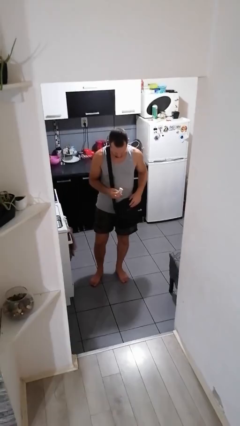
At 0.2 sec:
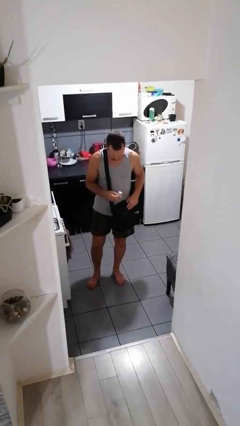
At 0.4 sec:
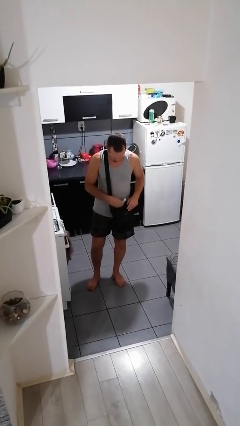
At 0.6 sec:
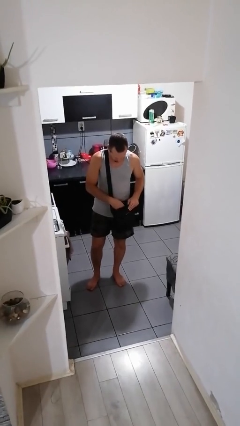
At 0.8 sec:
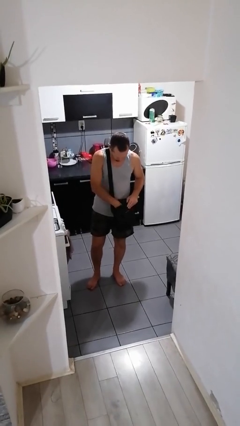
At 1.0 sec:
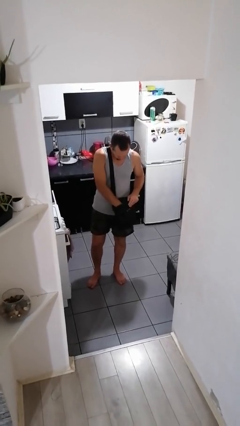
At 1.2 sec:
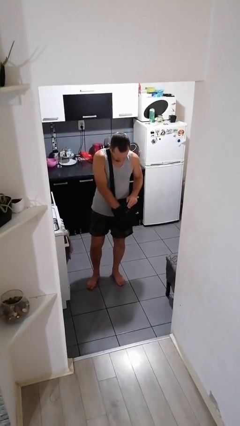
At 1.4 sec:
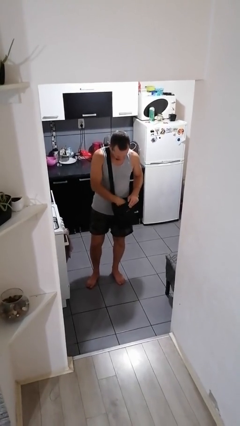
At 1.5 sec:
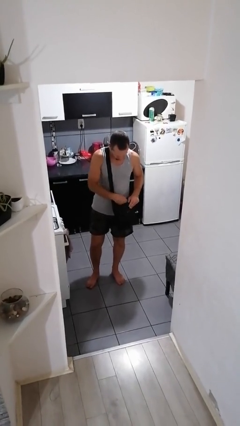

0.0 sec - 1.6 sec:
person puts object into purse

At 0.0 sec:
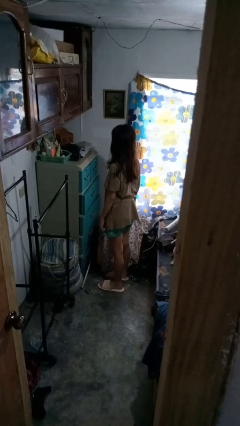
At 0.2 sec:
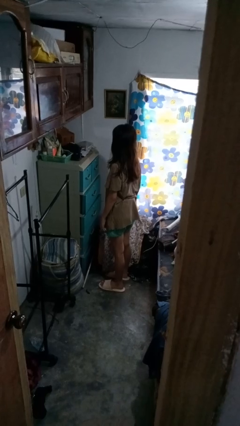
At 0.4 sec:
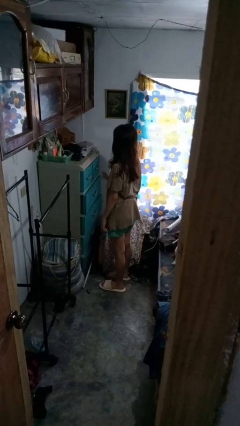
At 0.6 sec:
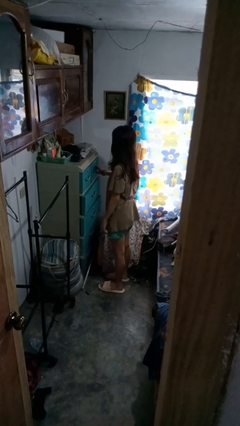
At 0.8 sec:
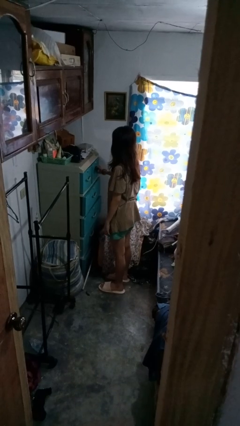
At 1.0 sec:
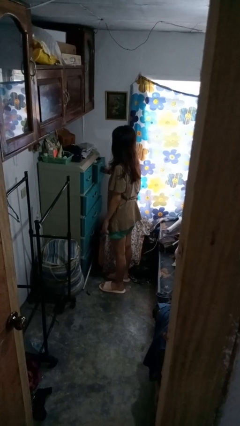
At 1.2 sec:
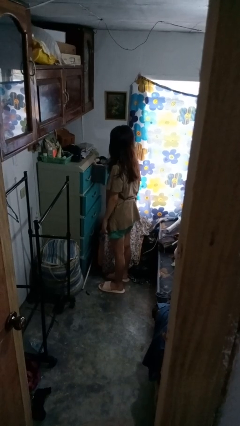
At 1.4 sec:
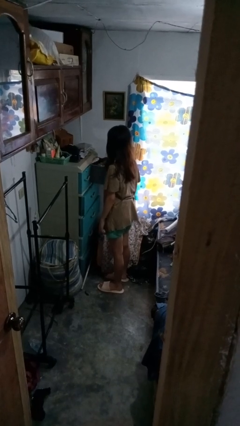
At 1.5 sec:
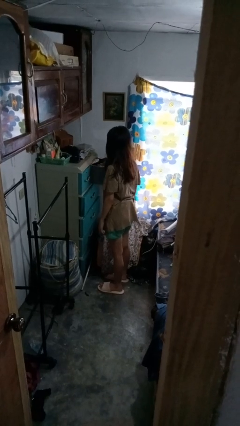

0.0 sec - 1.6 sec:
person opens dresser drawer

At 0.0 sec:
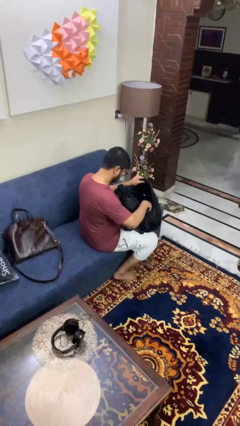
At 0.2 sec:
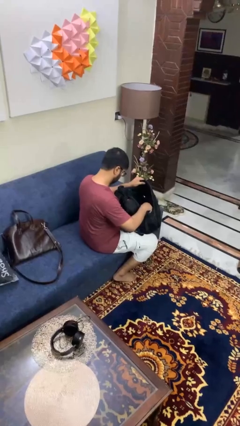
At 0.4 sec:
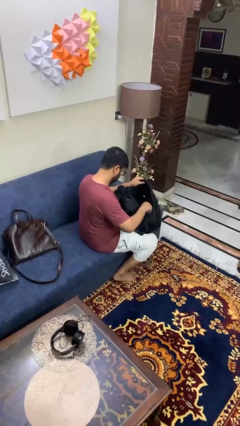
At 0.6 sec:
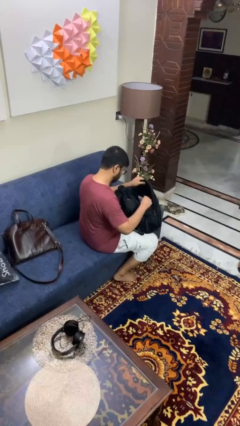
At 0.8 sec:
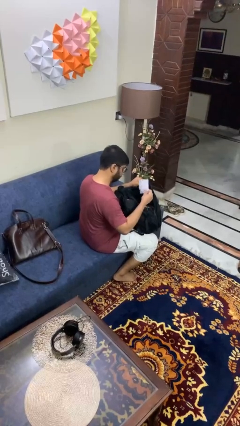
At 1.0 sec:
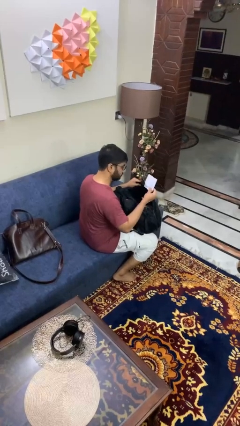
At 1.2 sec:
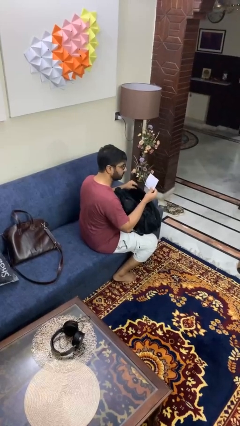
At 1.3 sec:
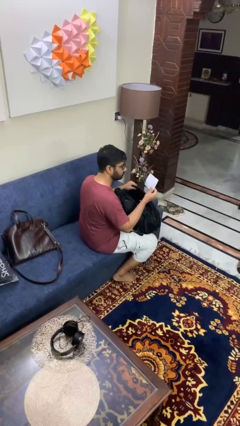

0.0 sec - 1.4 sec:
person takes object from backpack

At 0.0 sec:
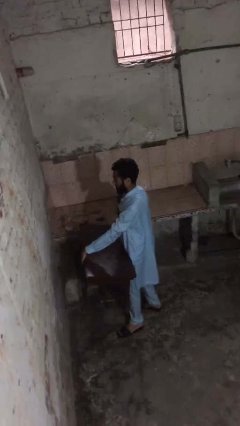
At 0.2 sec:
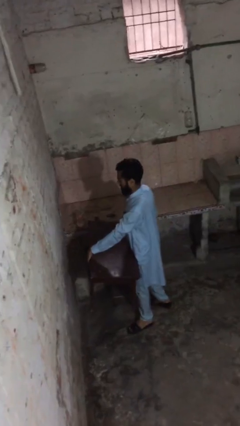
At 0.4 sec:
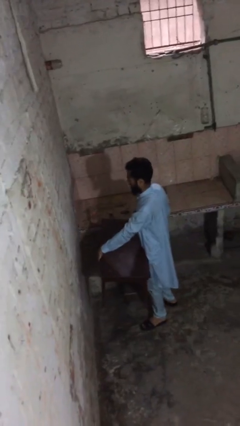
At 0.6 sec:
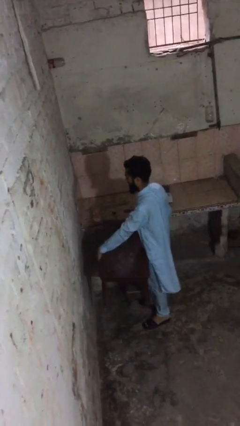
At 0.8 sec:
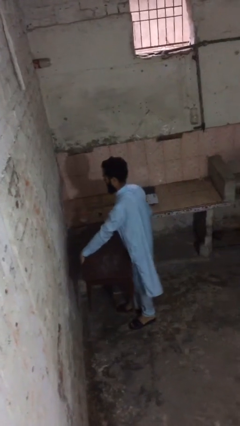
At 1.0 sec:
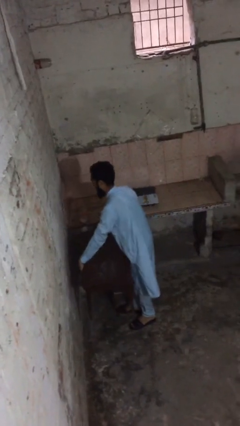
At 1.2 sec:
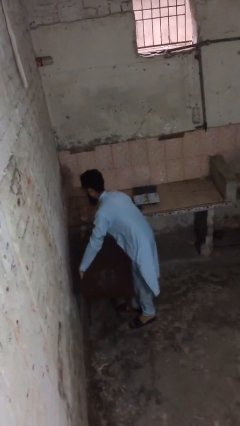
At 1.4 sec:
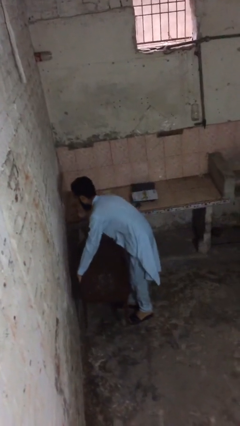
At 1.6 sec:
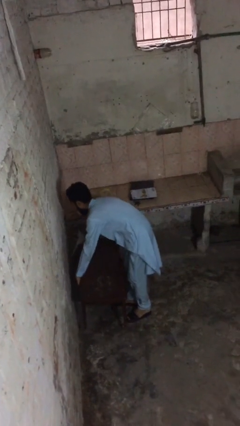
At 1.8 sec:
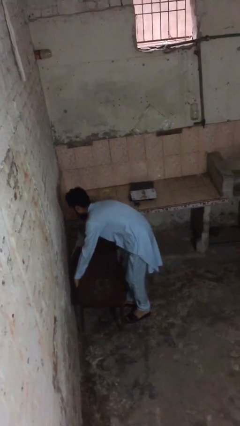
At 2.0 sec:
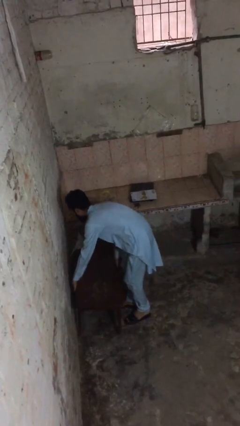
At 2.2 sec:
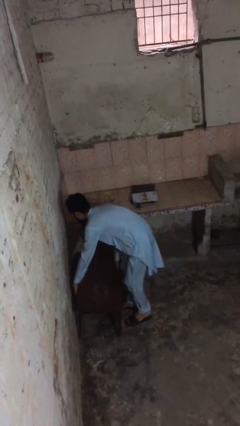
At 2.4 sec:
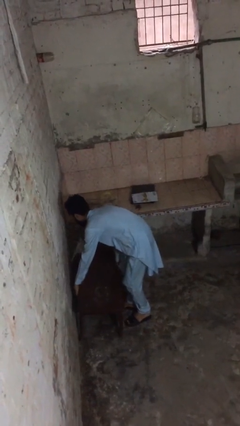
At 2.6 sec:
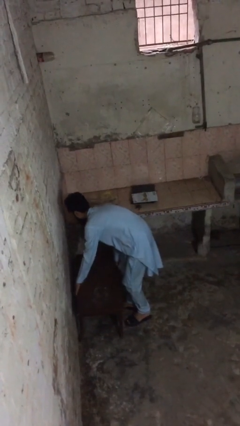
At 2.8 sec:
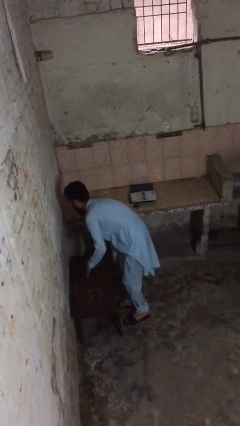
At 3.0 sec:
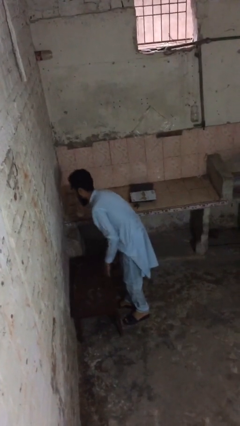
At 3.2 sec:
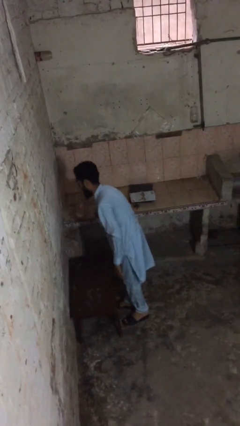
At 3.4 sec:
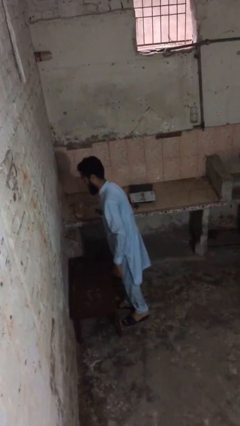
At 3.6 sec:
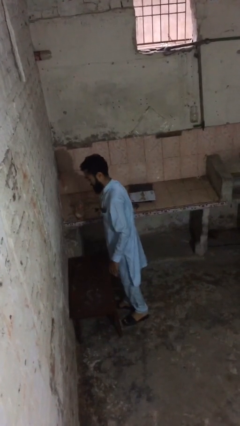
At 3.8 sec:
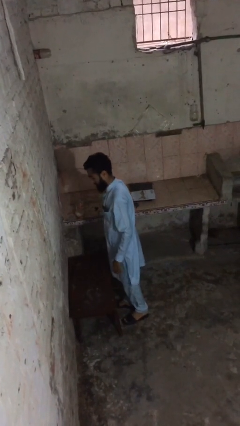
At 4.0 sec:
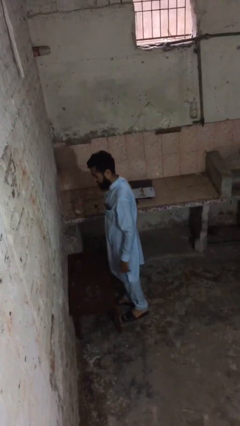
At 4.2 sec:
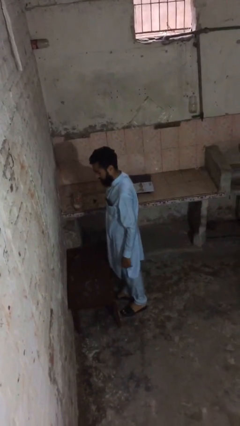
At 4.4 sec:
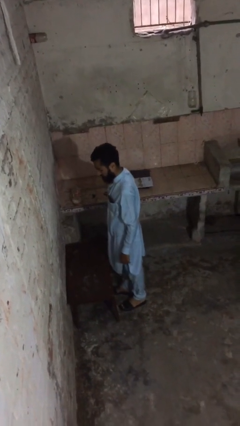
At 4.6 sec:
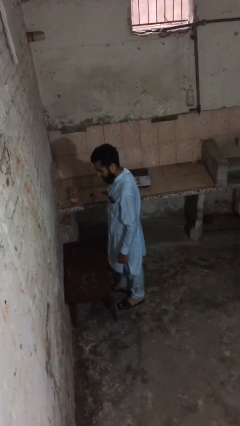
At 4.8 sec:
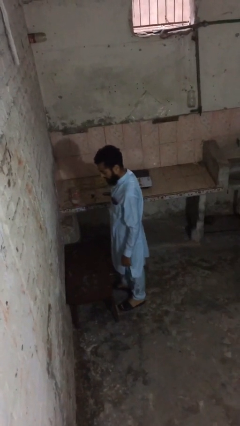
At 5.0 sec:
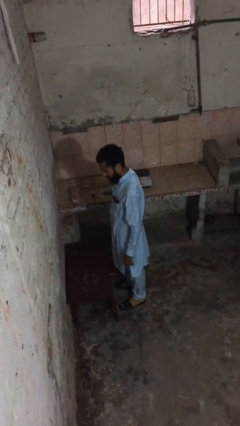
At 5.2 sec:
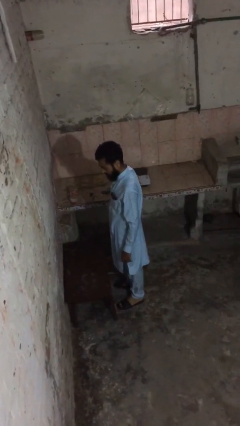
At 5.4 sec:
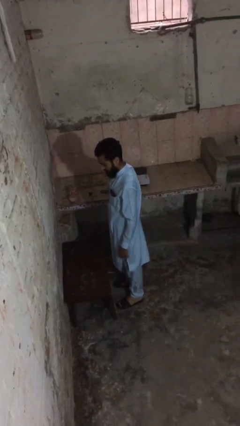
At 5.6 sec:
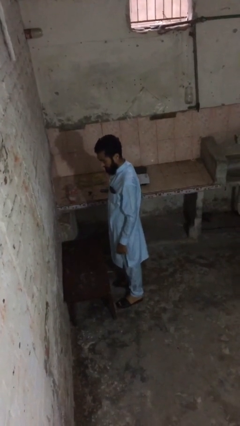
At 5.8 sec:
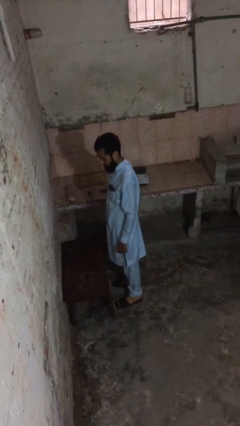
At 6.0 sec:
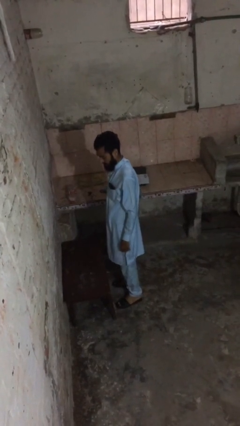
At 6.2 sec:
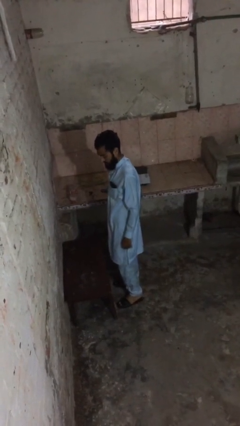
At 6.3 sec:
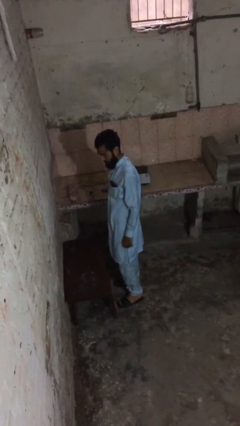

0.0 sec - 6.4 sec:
person puts down object on floor

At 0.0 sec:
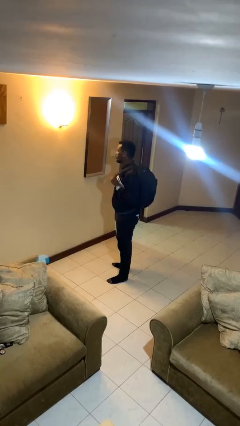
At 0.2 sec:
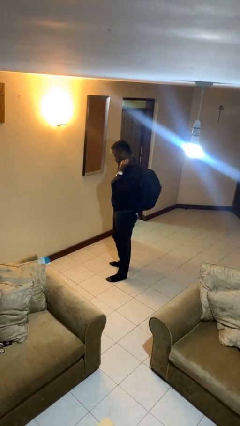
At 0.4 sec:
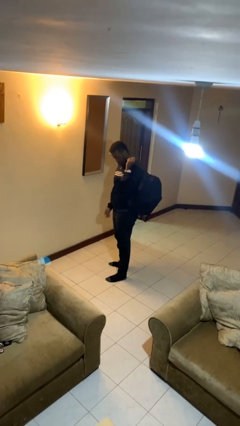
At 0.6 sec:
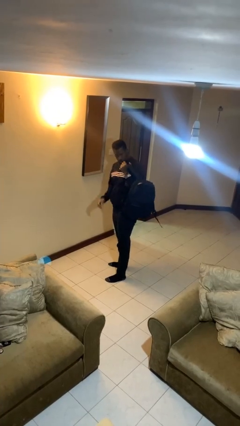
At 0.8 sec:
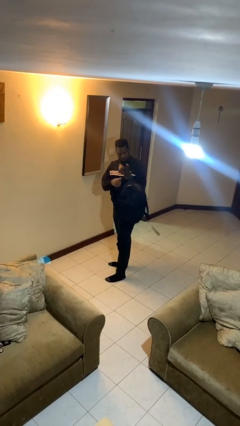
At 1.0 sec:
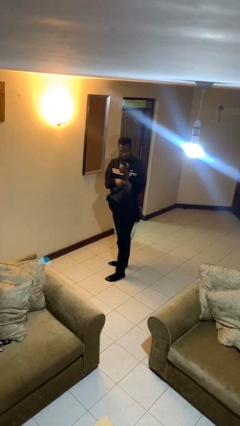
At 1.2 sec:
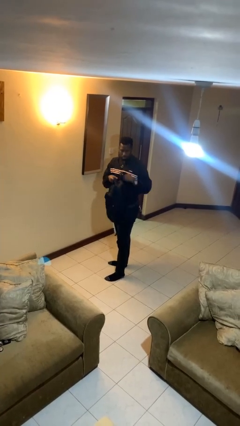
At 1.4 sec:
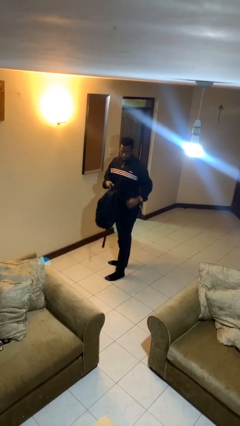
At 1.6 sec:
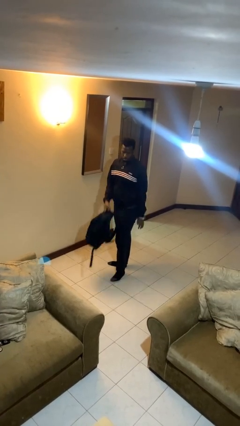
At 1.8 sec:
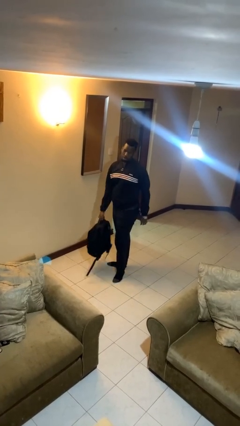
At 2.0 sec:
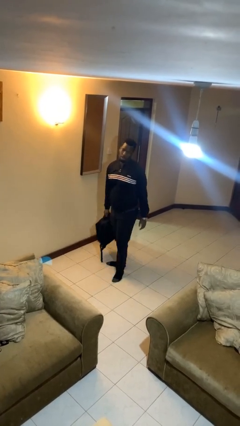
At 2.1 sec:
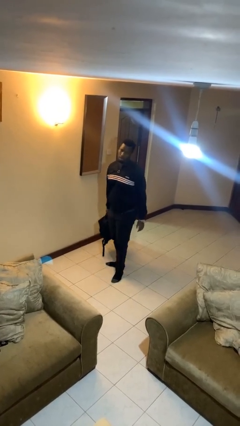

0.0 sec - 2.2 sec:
person takes off backpack

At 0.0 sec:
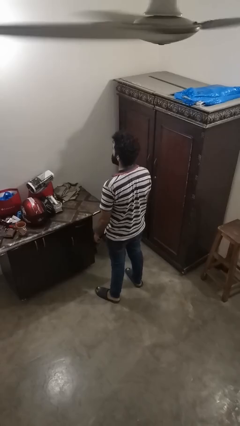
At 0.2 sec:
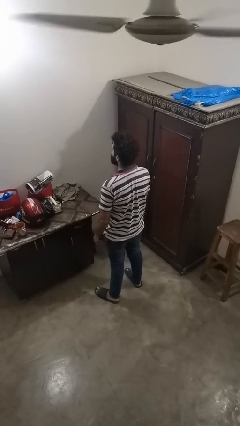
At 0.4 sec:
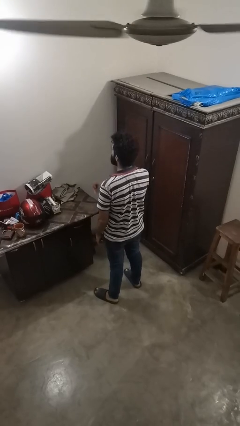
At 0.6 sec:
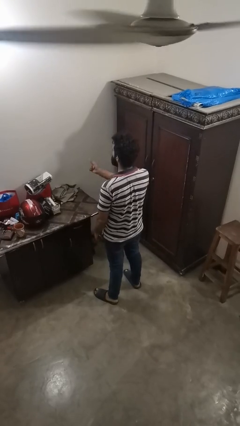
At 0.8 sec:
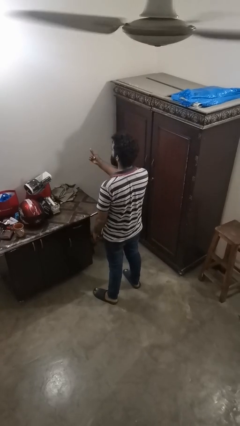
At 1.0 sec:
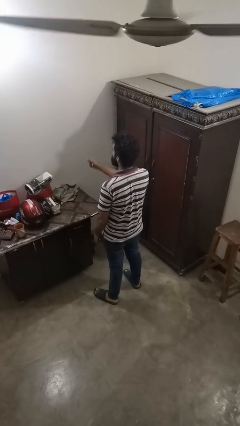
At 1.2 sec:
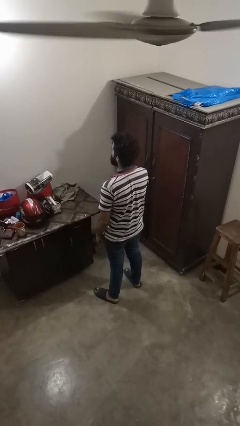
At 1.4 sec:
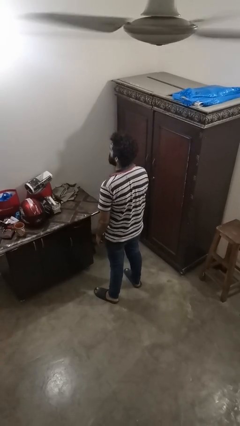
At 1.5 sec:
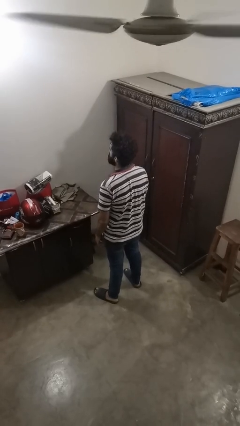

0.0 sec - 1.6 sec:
person snaps fingers

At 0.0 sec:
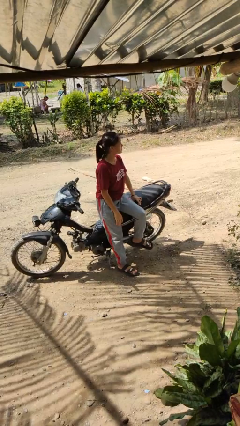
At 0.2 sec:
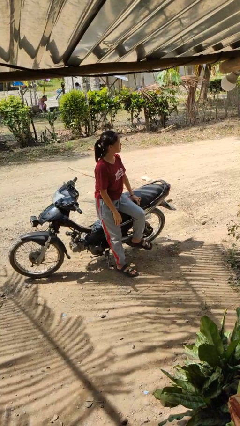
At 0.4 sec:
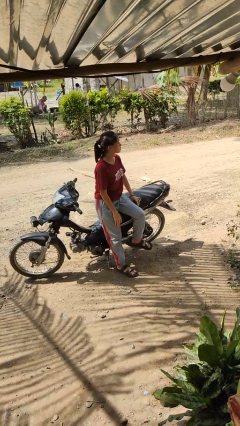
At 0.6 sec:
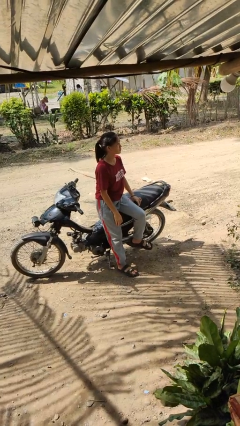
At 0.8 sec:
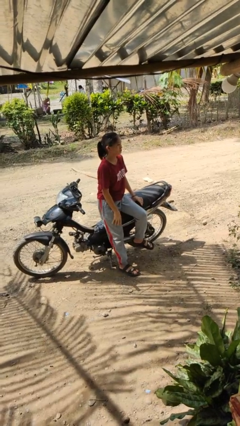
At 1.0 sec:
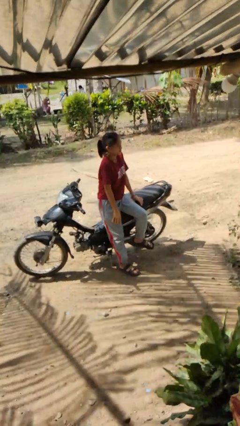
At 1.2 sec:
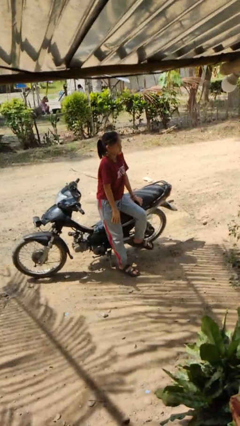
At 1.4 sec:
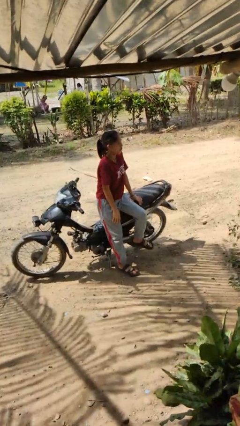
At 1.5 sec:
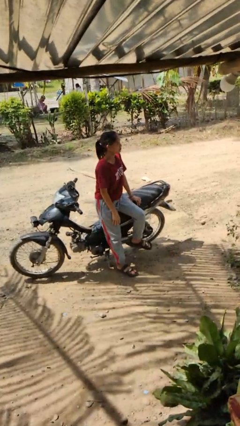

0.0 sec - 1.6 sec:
person shrugs

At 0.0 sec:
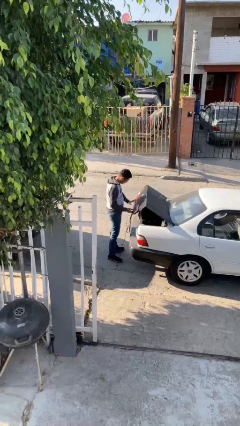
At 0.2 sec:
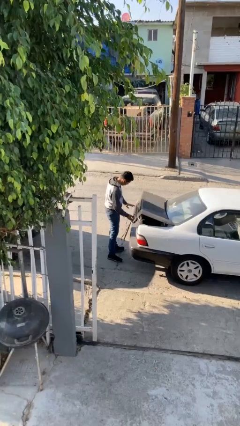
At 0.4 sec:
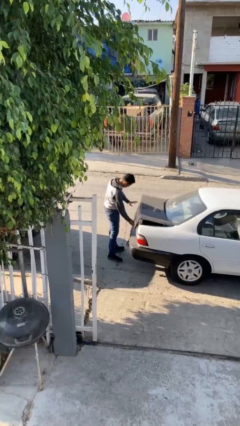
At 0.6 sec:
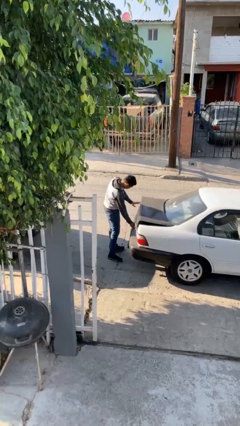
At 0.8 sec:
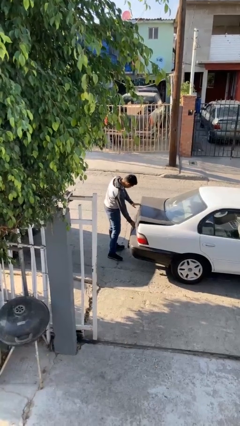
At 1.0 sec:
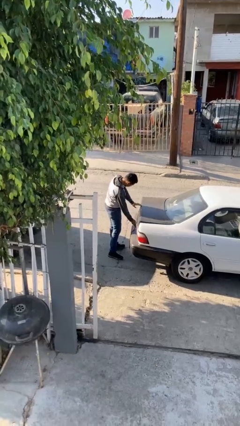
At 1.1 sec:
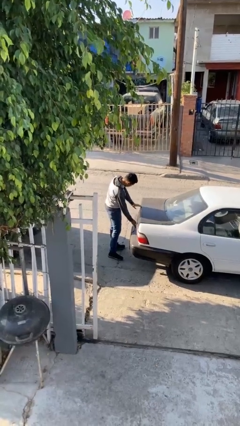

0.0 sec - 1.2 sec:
person closes car trunk
